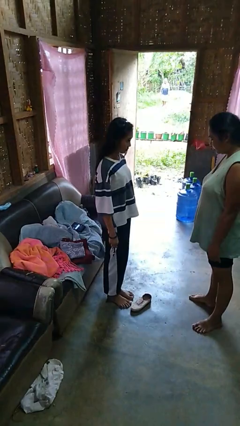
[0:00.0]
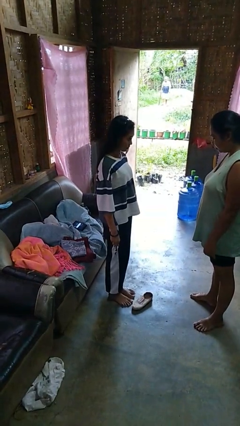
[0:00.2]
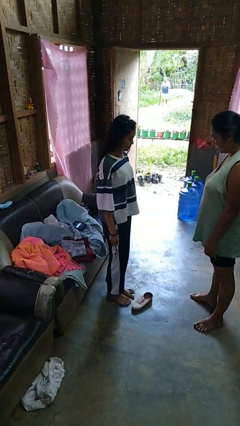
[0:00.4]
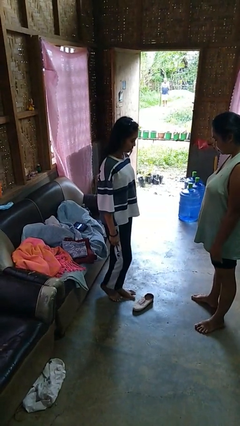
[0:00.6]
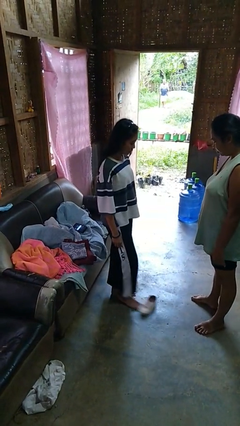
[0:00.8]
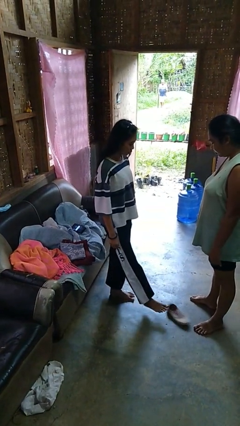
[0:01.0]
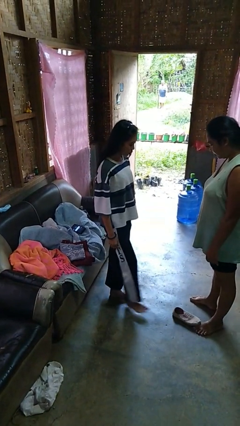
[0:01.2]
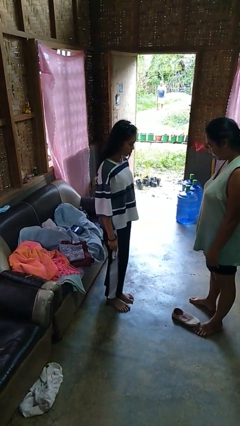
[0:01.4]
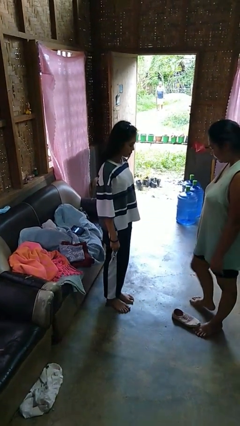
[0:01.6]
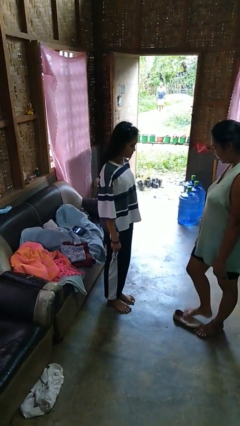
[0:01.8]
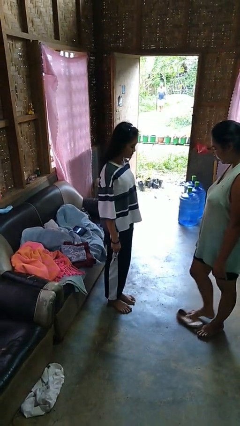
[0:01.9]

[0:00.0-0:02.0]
person kicks object to person

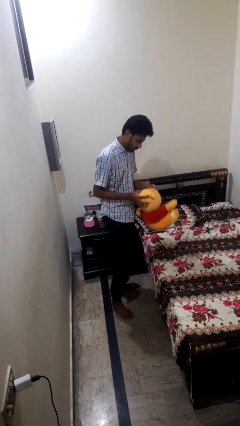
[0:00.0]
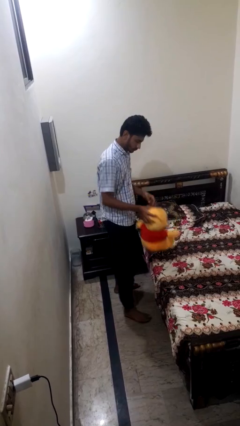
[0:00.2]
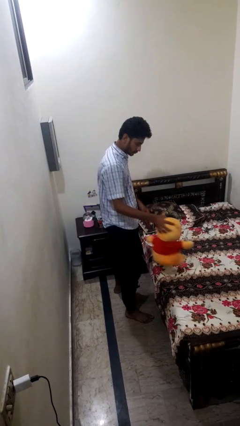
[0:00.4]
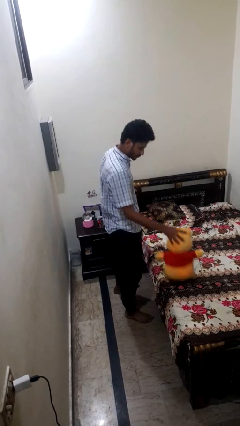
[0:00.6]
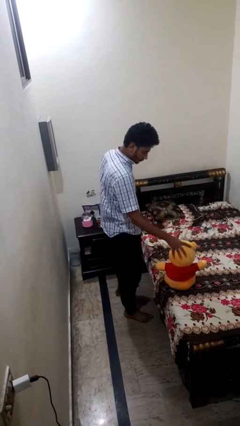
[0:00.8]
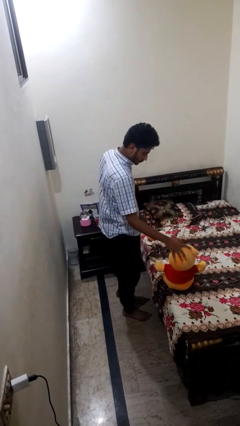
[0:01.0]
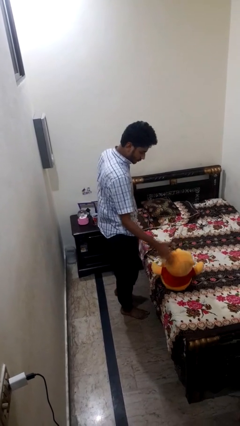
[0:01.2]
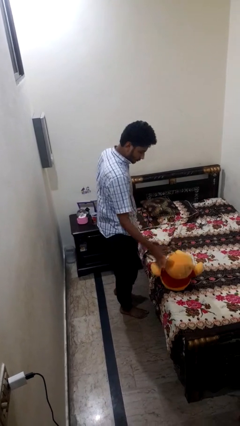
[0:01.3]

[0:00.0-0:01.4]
person puts down object on bed

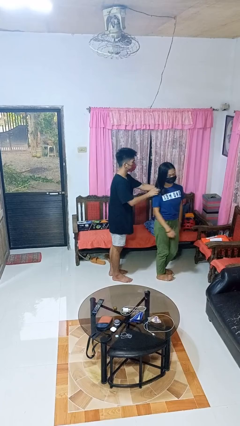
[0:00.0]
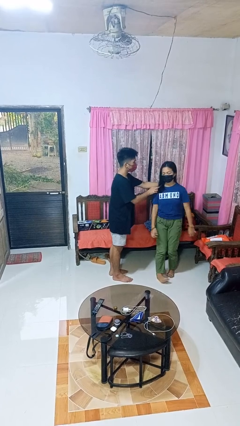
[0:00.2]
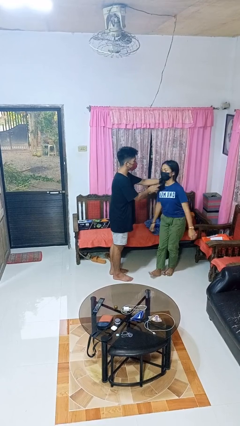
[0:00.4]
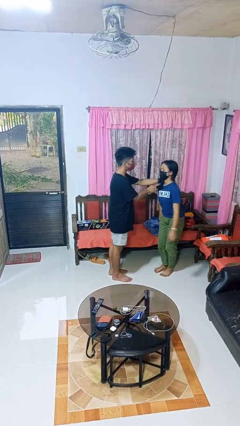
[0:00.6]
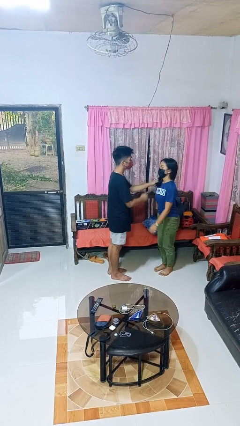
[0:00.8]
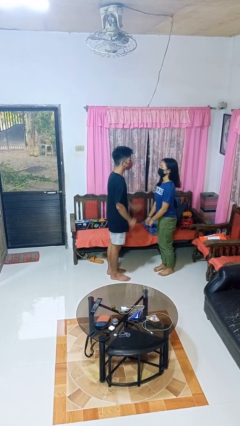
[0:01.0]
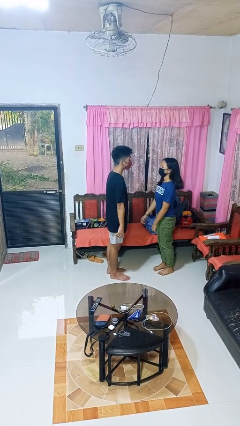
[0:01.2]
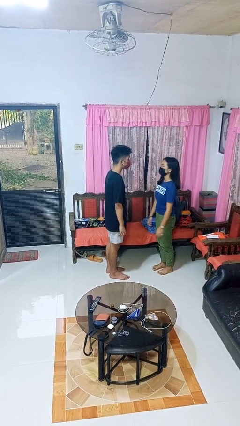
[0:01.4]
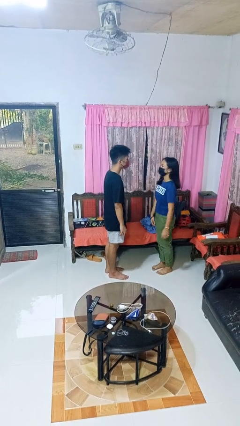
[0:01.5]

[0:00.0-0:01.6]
person spins person around

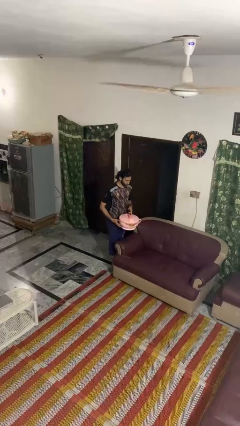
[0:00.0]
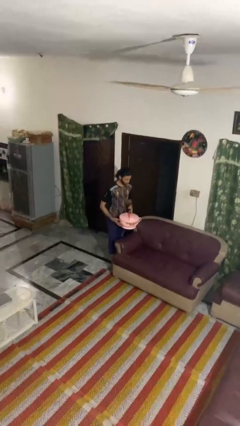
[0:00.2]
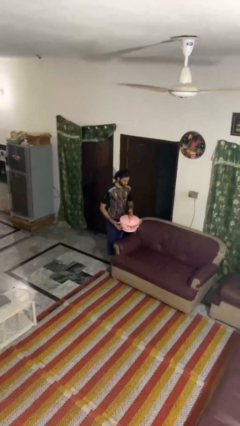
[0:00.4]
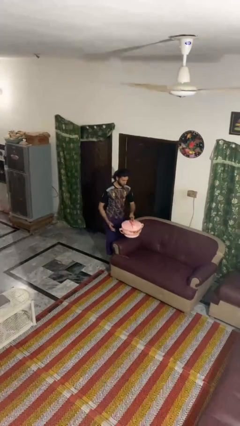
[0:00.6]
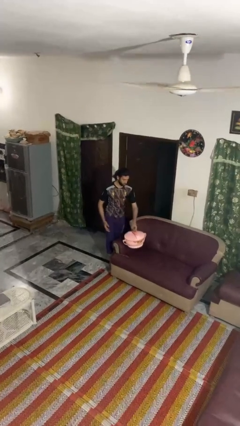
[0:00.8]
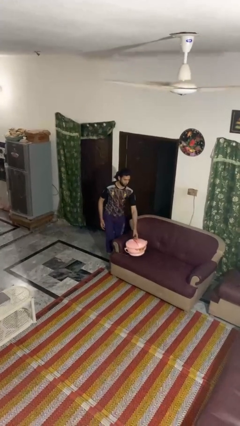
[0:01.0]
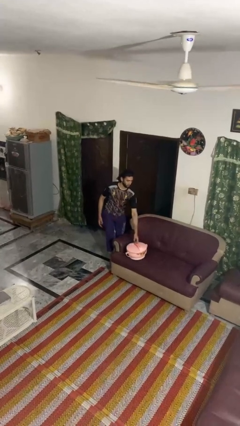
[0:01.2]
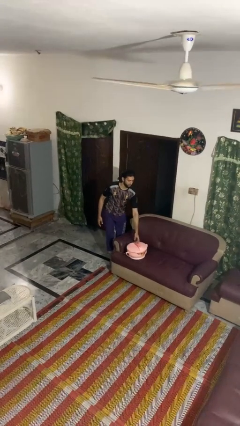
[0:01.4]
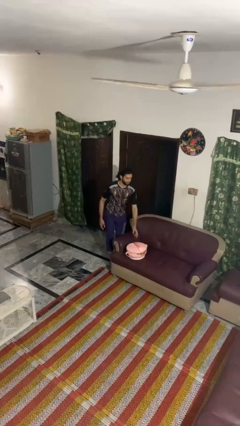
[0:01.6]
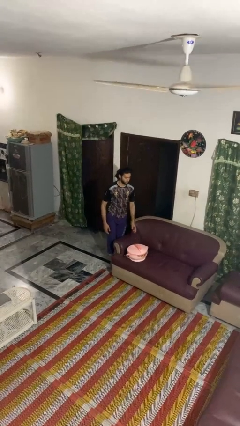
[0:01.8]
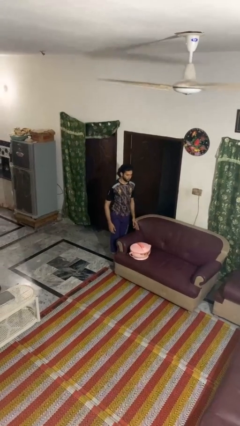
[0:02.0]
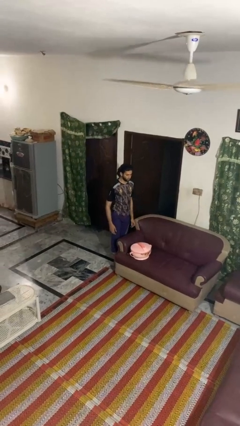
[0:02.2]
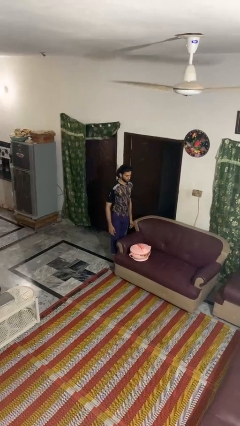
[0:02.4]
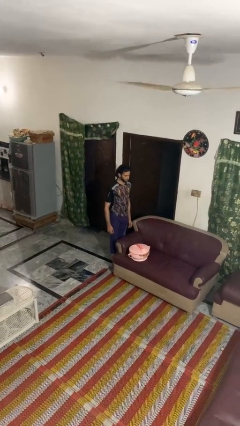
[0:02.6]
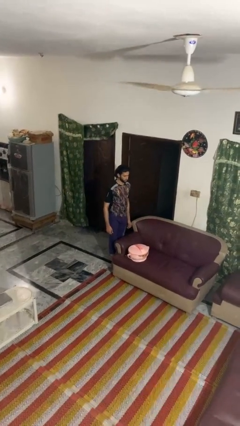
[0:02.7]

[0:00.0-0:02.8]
person puts down object on couch

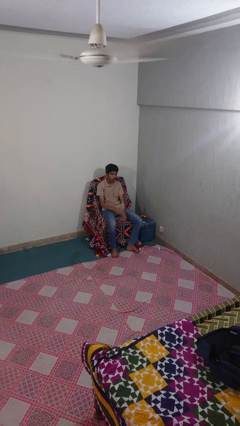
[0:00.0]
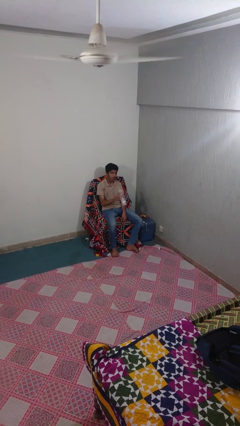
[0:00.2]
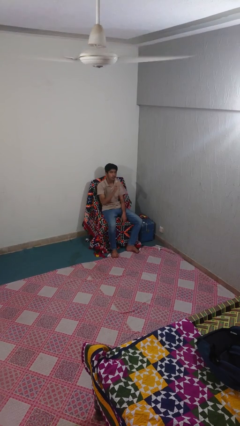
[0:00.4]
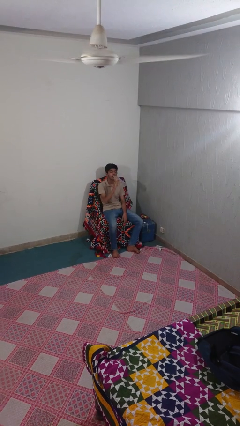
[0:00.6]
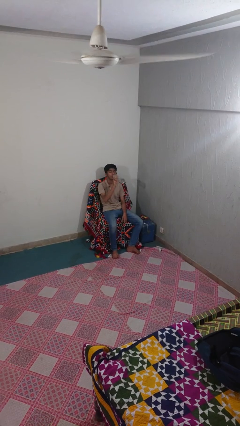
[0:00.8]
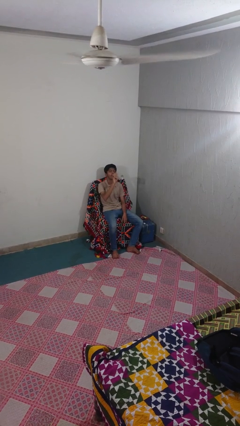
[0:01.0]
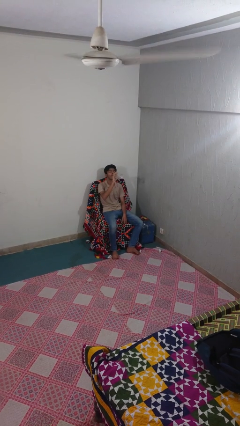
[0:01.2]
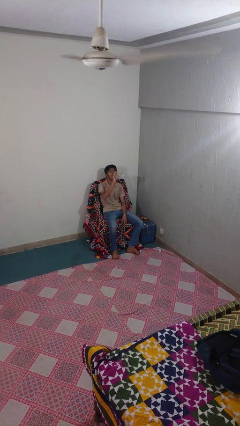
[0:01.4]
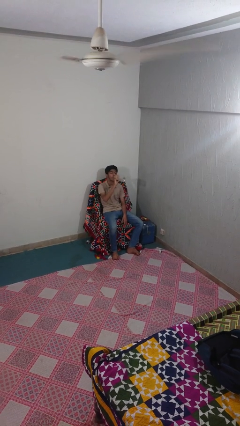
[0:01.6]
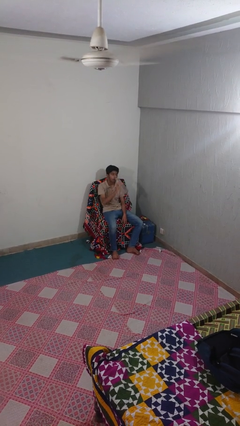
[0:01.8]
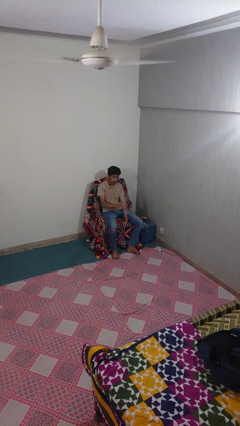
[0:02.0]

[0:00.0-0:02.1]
person drinks from bottle

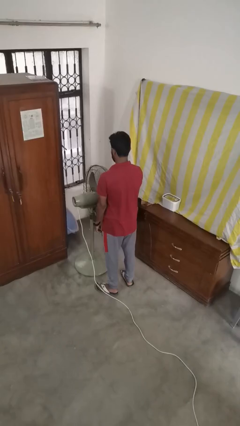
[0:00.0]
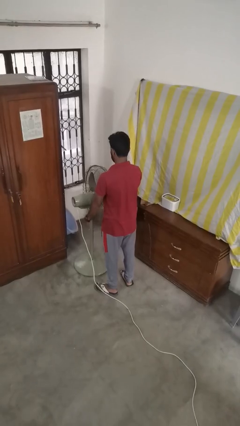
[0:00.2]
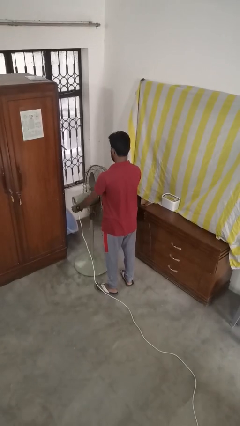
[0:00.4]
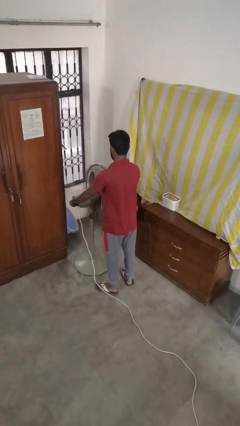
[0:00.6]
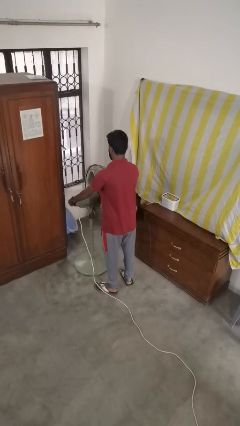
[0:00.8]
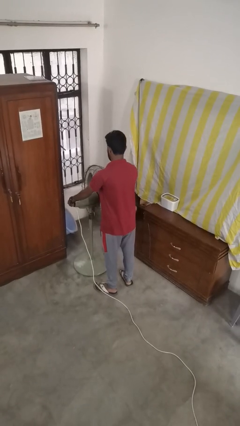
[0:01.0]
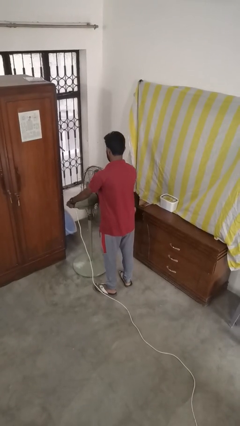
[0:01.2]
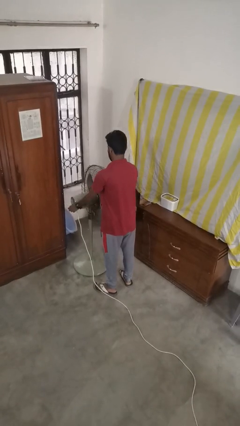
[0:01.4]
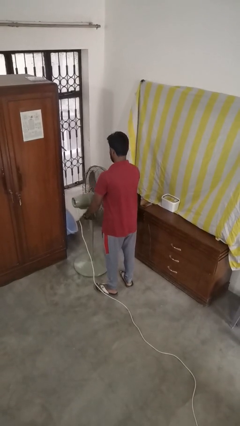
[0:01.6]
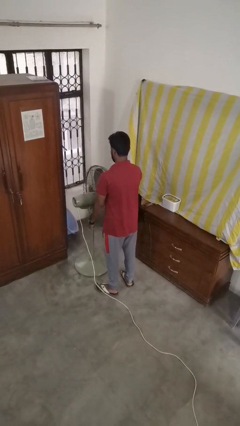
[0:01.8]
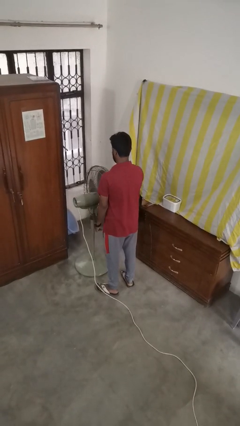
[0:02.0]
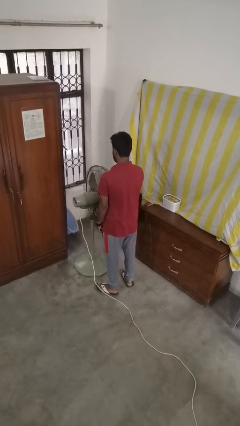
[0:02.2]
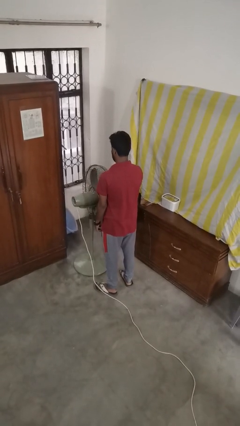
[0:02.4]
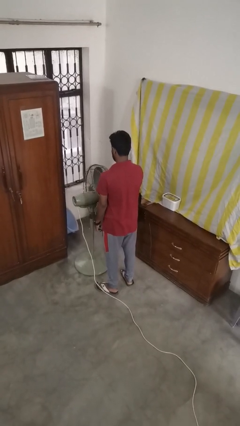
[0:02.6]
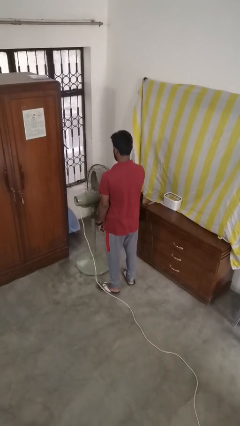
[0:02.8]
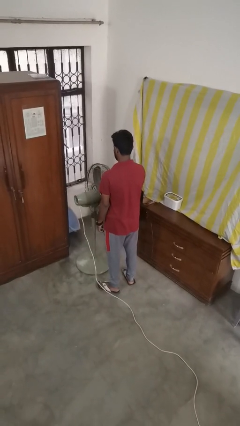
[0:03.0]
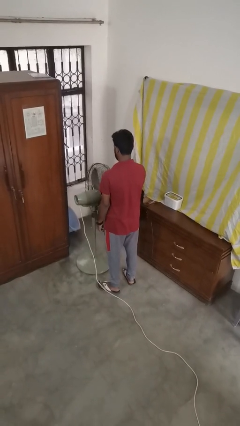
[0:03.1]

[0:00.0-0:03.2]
person turns on fan

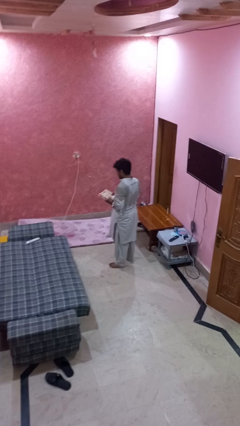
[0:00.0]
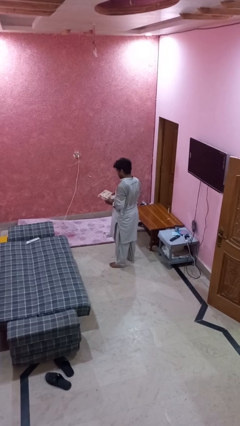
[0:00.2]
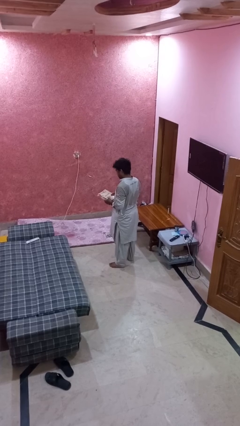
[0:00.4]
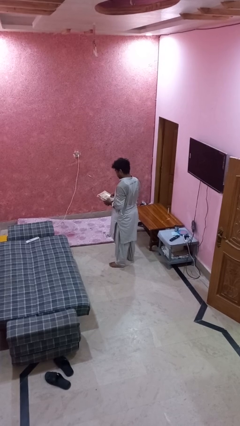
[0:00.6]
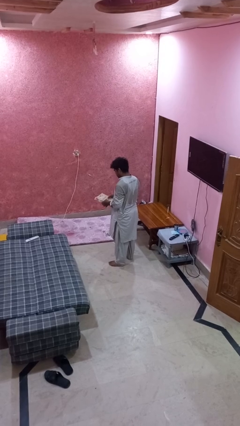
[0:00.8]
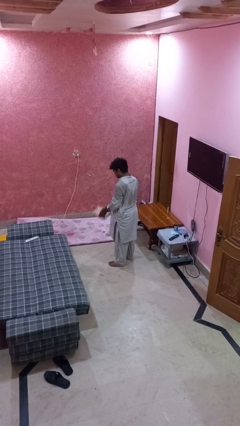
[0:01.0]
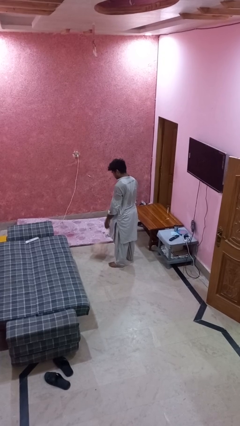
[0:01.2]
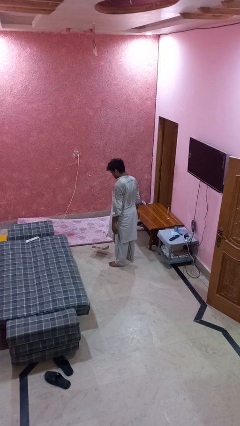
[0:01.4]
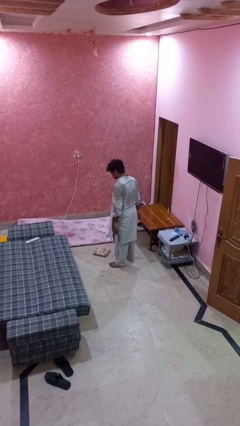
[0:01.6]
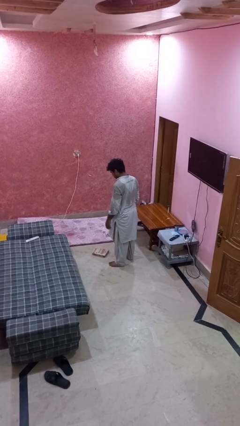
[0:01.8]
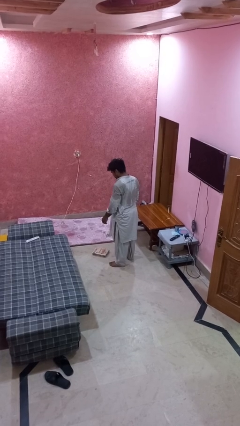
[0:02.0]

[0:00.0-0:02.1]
person throws object to ground

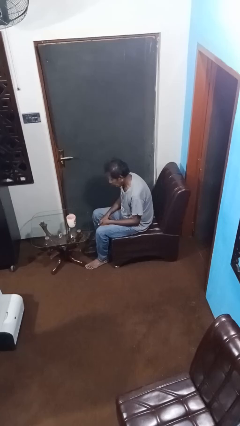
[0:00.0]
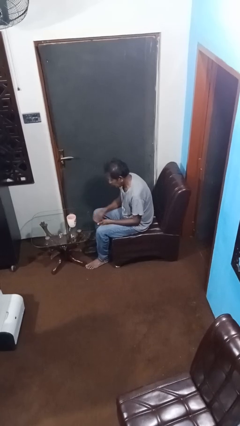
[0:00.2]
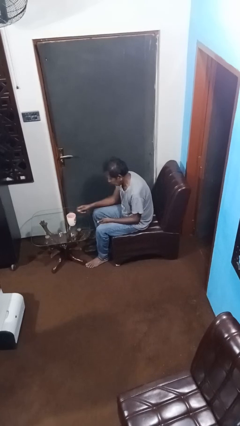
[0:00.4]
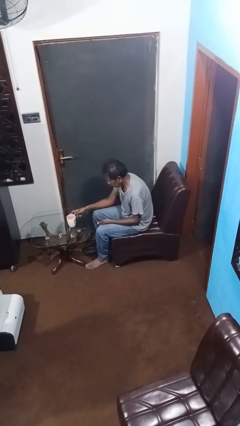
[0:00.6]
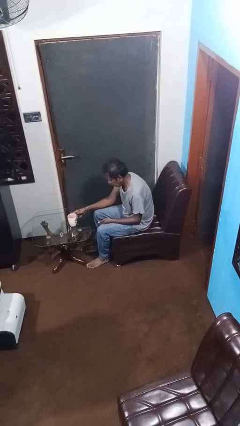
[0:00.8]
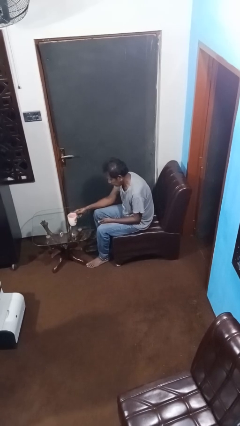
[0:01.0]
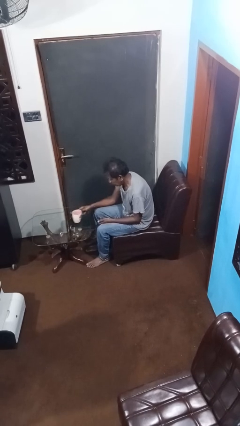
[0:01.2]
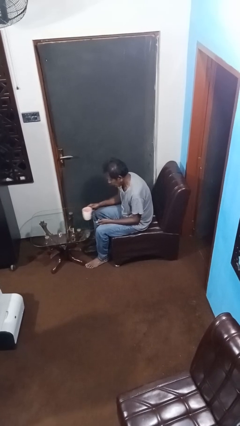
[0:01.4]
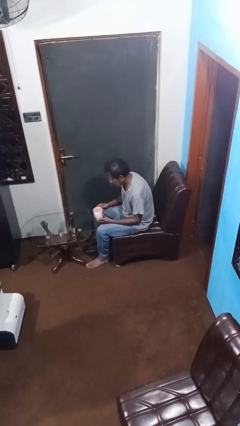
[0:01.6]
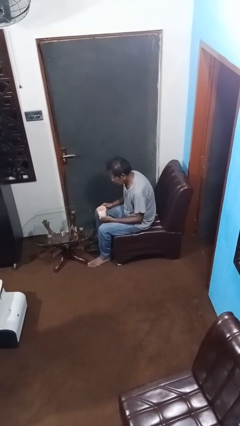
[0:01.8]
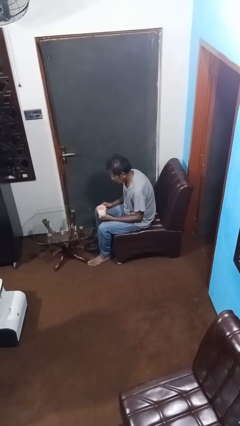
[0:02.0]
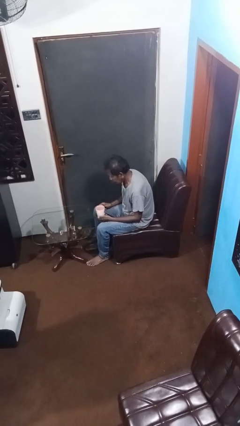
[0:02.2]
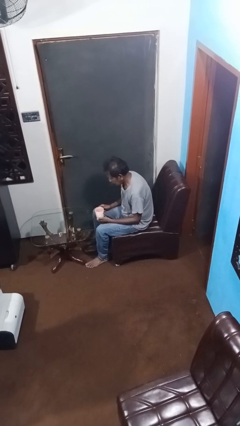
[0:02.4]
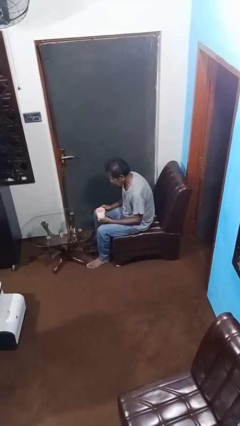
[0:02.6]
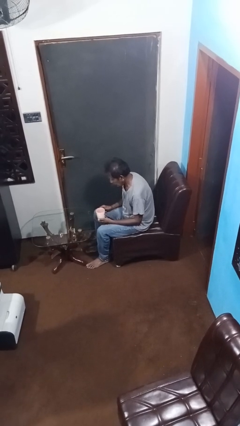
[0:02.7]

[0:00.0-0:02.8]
person picks up object from table
